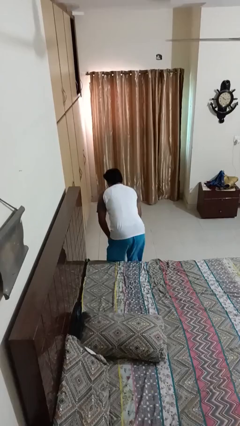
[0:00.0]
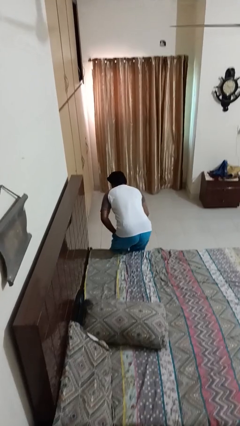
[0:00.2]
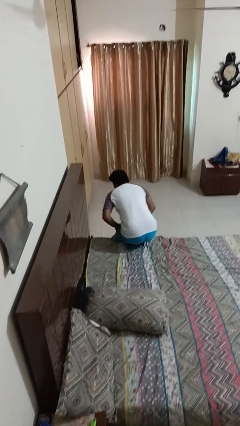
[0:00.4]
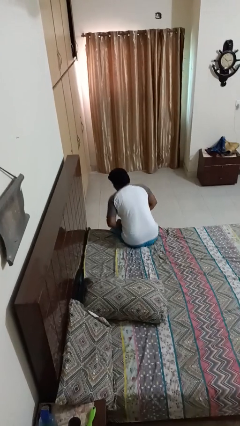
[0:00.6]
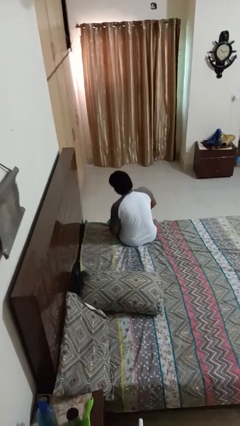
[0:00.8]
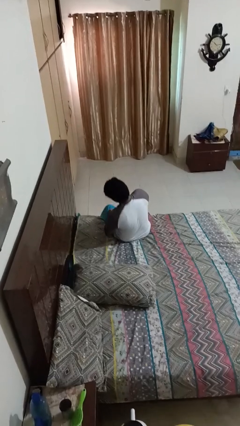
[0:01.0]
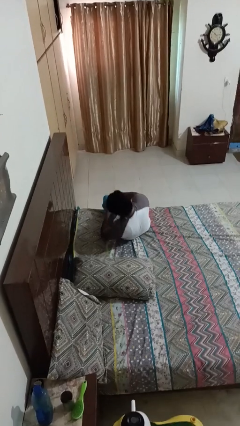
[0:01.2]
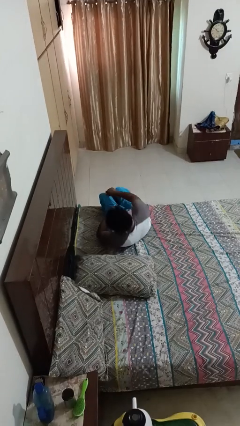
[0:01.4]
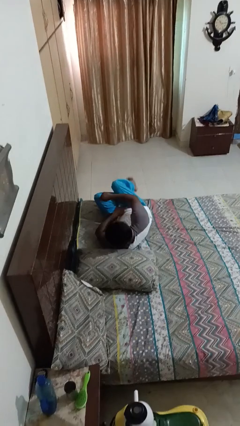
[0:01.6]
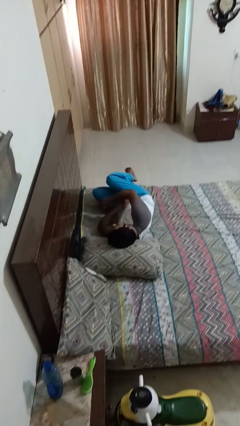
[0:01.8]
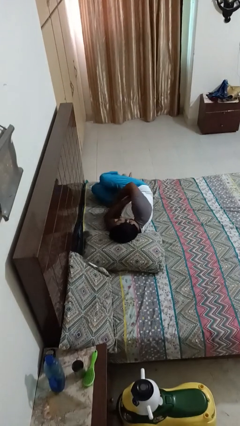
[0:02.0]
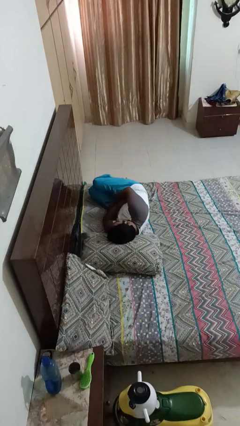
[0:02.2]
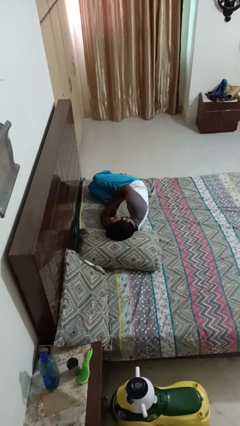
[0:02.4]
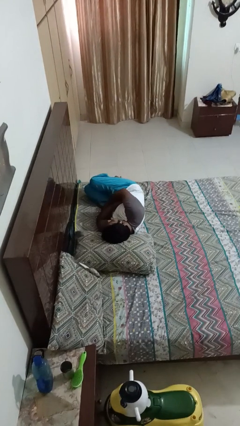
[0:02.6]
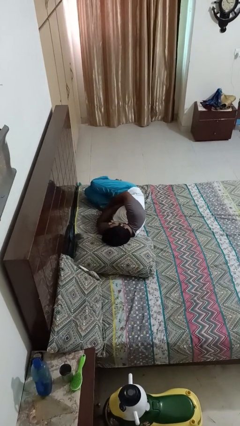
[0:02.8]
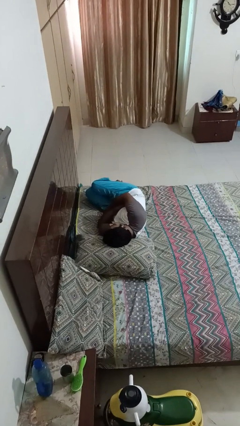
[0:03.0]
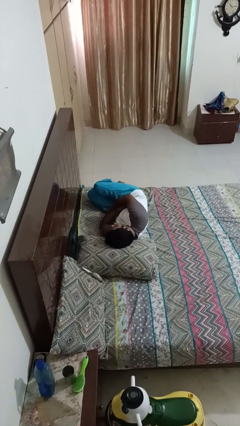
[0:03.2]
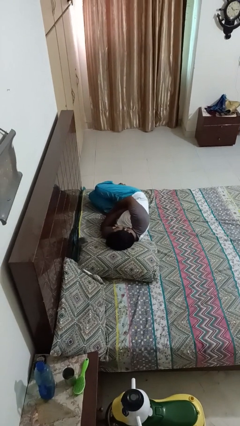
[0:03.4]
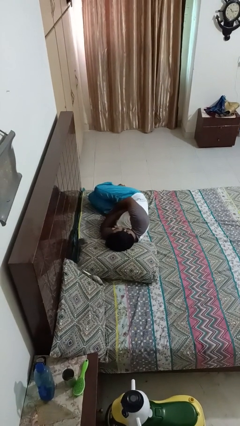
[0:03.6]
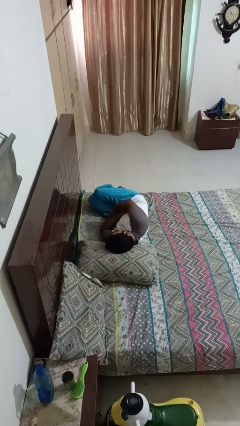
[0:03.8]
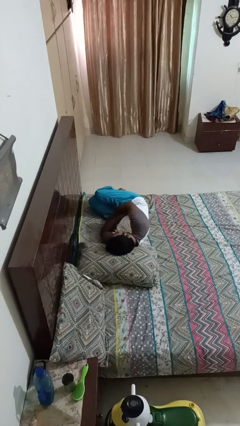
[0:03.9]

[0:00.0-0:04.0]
person lies down on bed

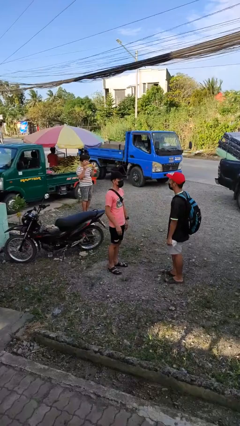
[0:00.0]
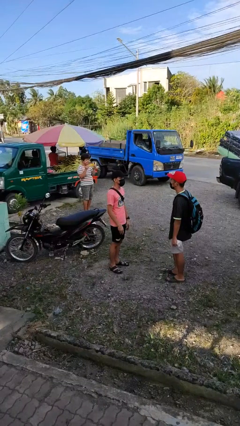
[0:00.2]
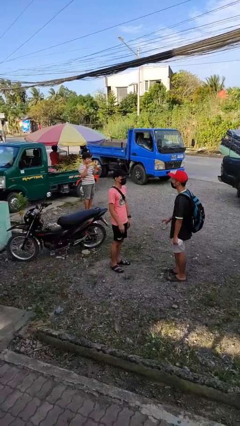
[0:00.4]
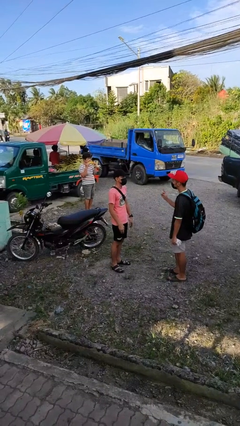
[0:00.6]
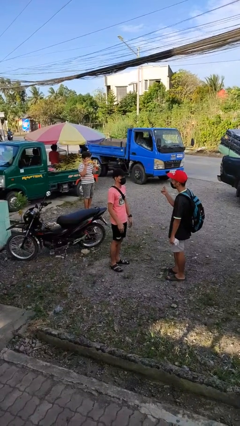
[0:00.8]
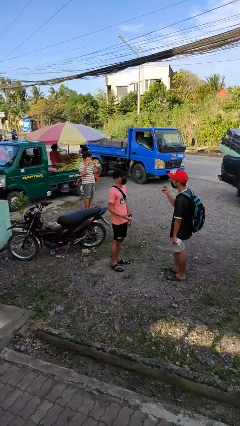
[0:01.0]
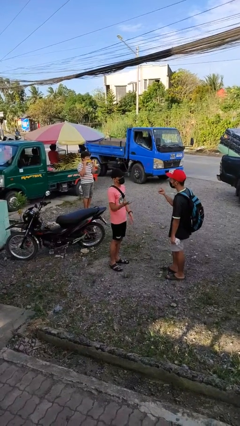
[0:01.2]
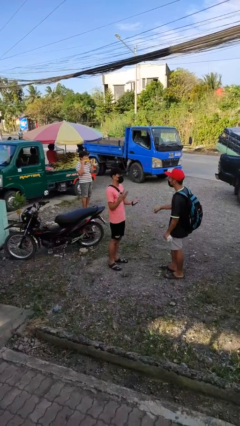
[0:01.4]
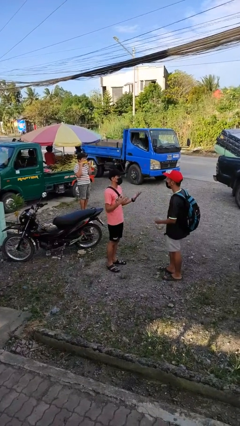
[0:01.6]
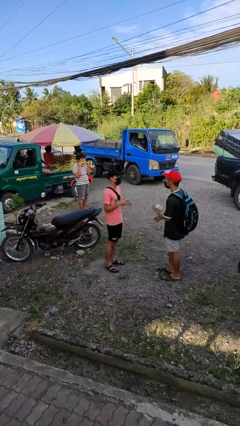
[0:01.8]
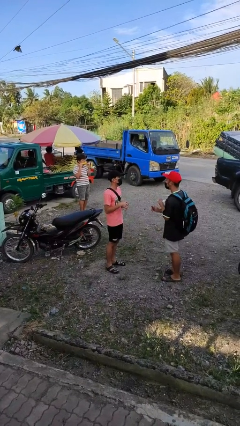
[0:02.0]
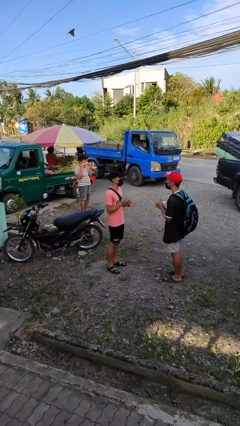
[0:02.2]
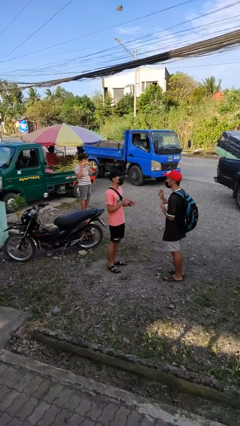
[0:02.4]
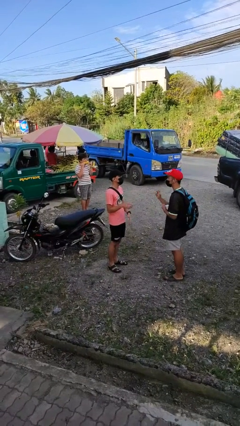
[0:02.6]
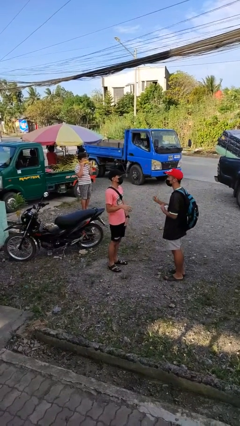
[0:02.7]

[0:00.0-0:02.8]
person talks to person

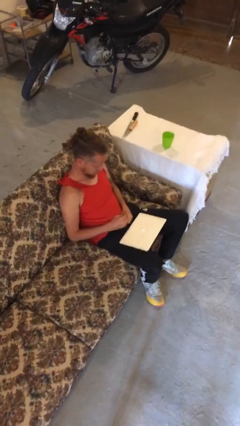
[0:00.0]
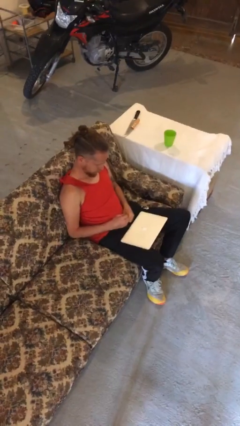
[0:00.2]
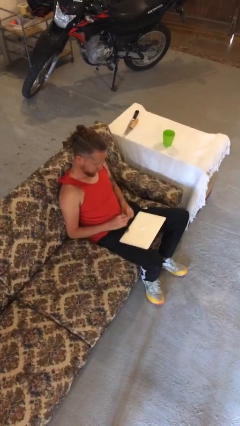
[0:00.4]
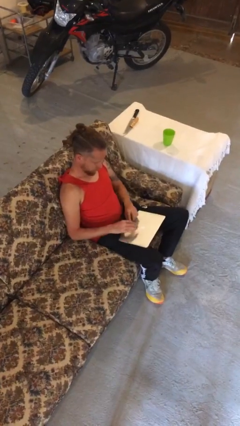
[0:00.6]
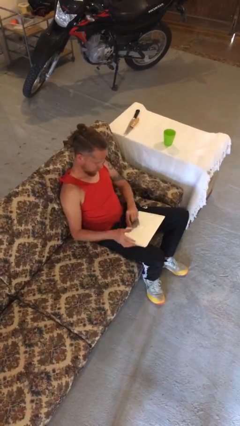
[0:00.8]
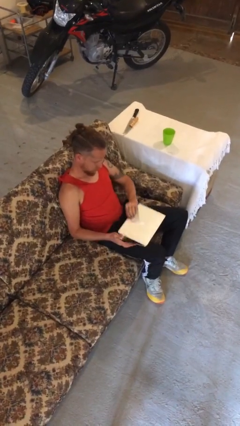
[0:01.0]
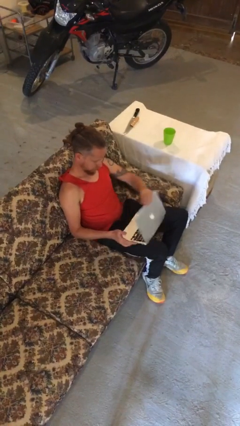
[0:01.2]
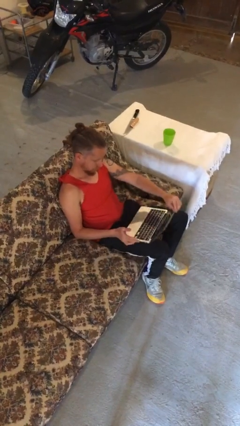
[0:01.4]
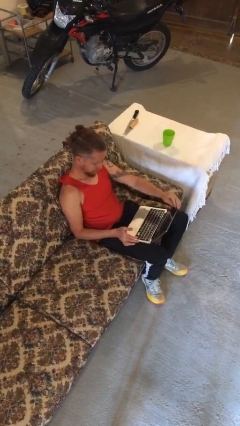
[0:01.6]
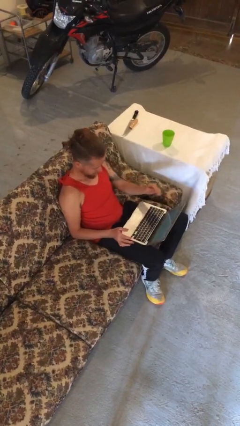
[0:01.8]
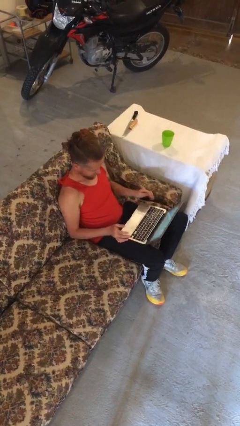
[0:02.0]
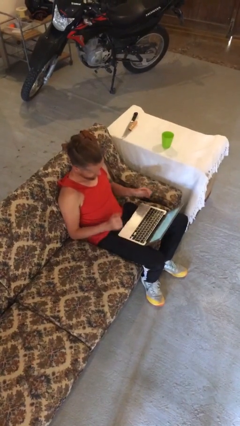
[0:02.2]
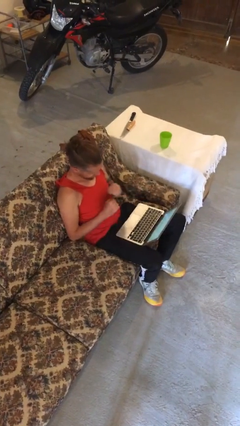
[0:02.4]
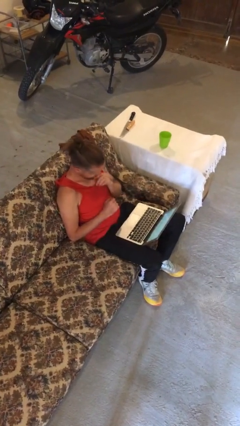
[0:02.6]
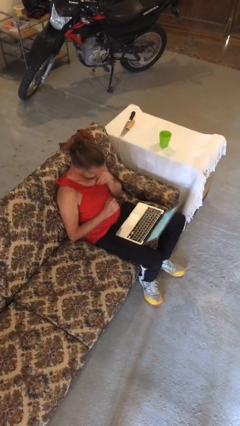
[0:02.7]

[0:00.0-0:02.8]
person opens laptop

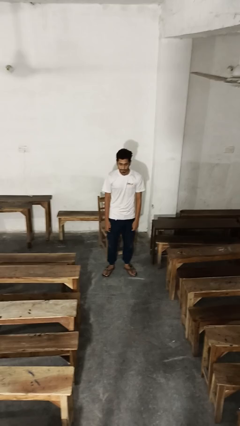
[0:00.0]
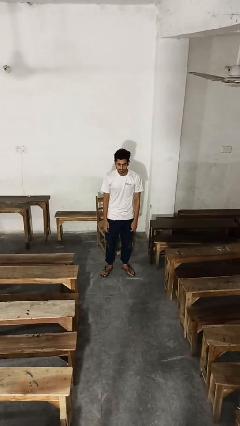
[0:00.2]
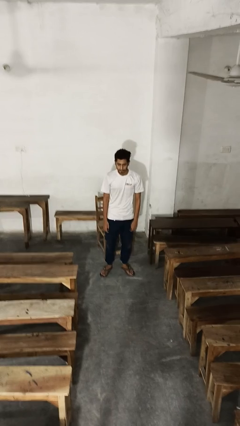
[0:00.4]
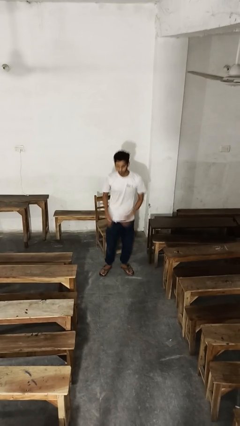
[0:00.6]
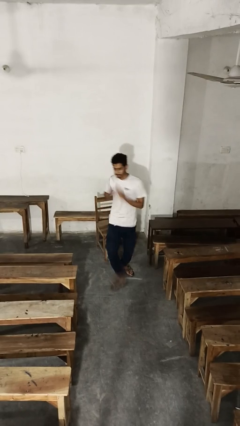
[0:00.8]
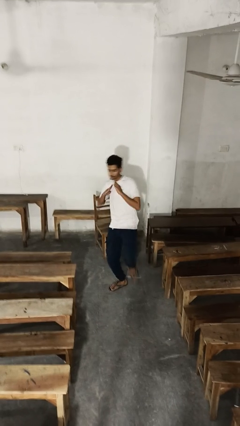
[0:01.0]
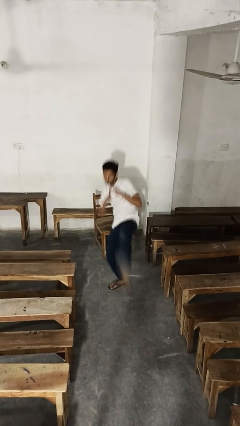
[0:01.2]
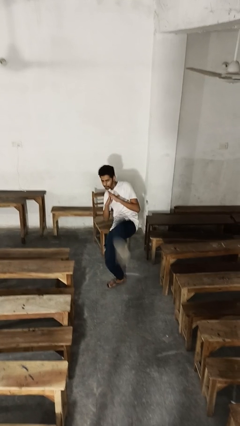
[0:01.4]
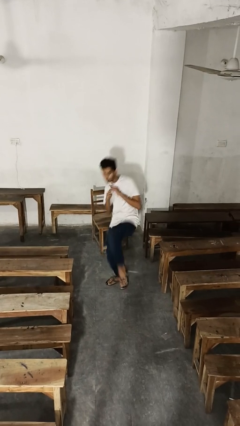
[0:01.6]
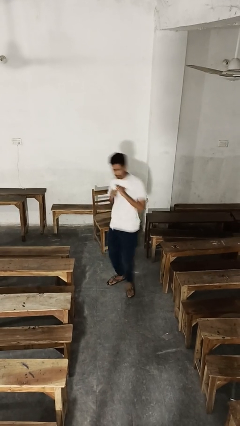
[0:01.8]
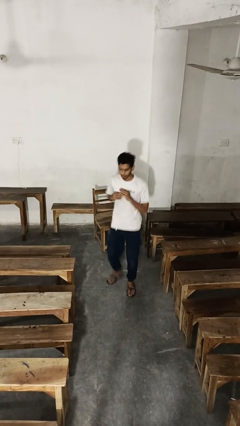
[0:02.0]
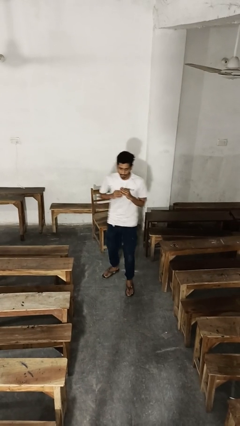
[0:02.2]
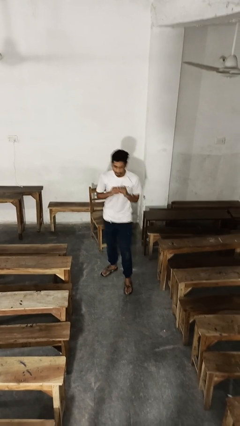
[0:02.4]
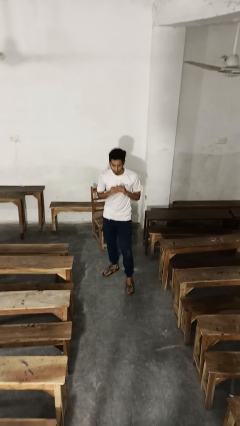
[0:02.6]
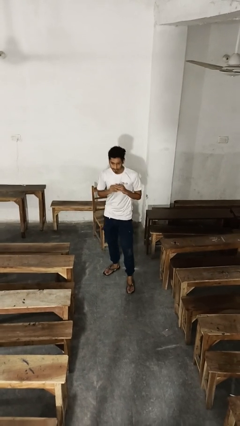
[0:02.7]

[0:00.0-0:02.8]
person karate kicks

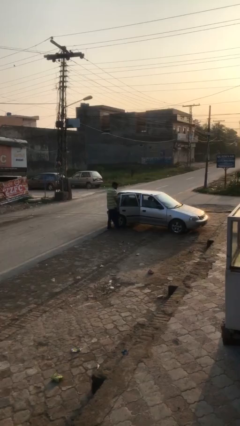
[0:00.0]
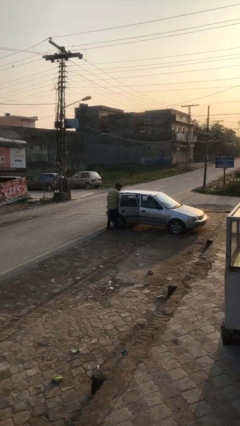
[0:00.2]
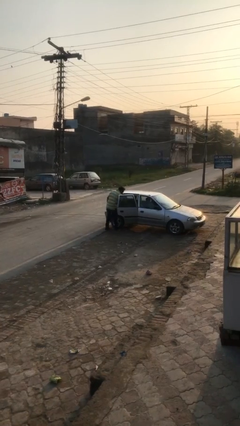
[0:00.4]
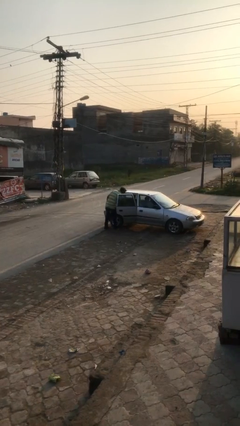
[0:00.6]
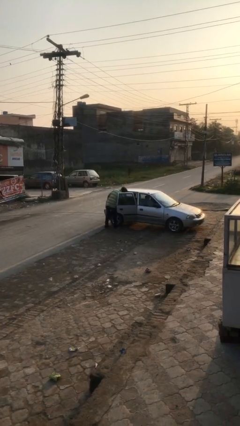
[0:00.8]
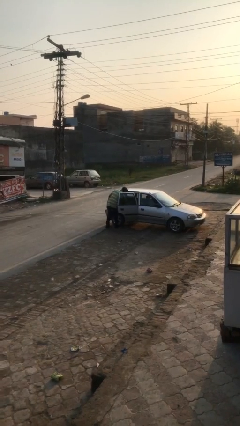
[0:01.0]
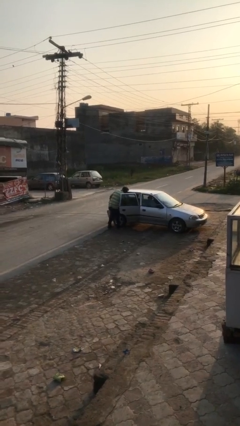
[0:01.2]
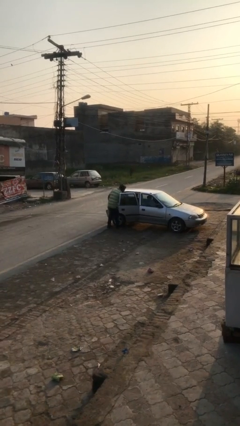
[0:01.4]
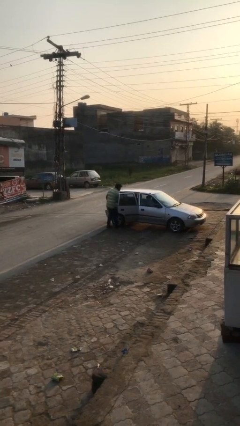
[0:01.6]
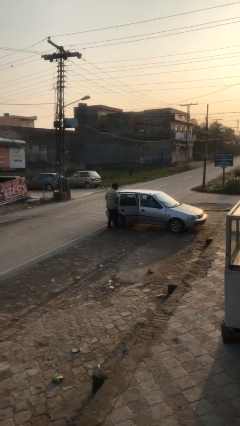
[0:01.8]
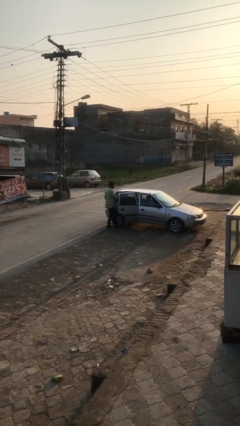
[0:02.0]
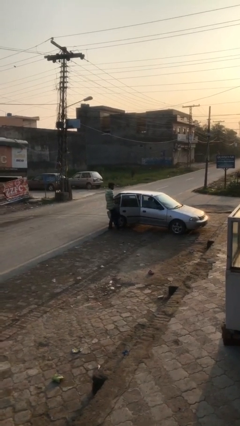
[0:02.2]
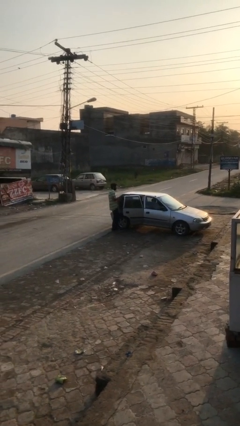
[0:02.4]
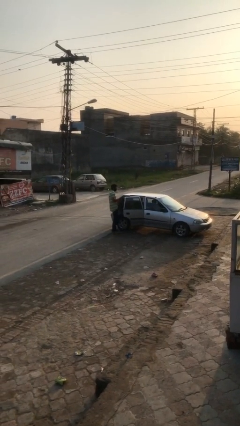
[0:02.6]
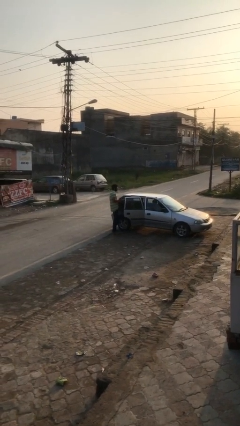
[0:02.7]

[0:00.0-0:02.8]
person unloads car

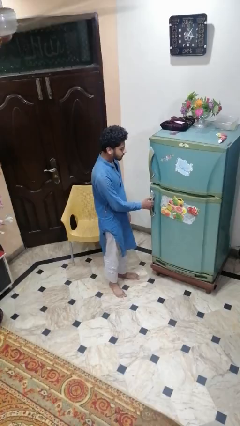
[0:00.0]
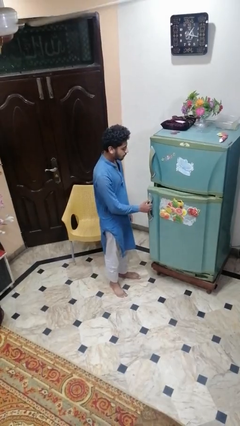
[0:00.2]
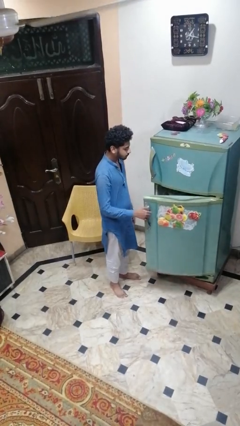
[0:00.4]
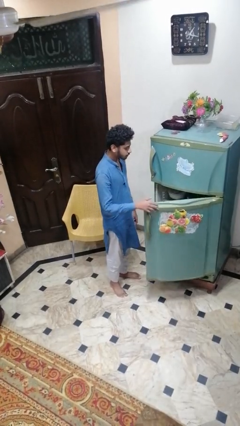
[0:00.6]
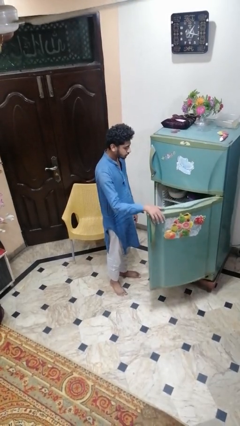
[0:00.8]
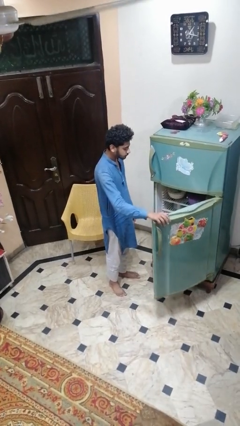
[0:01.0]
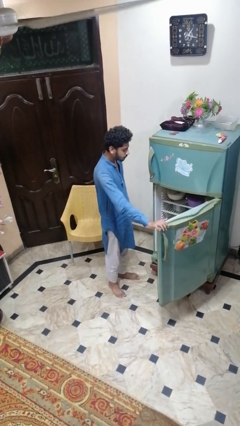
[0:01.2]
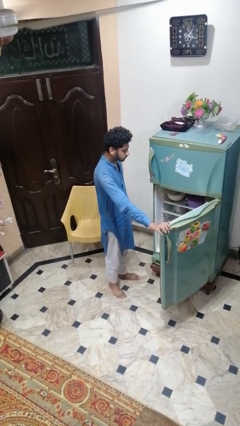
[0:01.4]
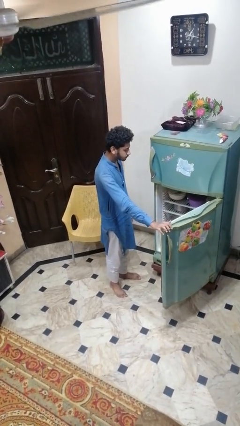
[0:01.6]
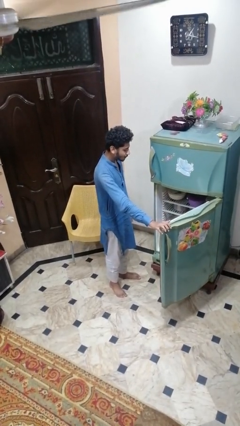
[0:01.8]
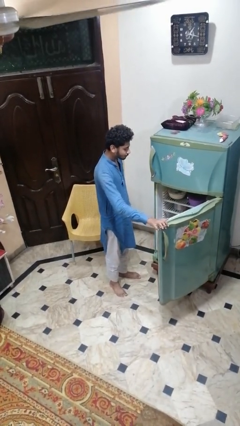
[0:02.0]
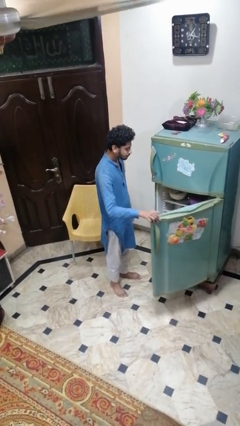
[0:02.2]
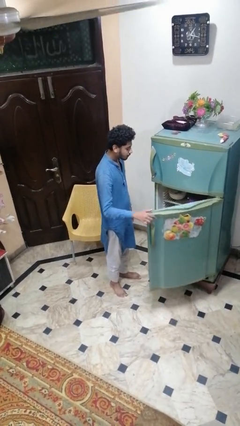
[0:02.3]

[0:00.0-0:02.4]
person opens refrigerator
